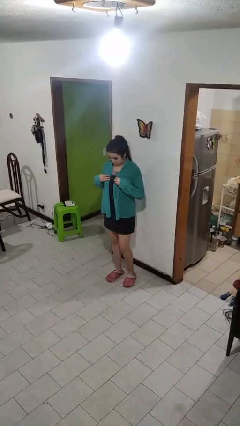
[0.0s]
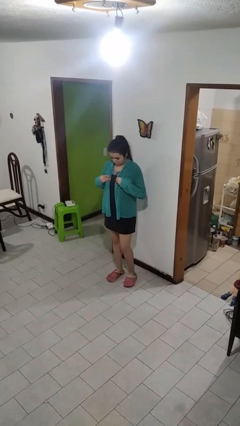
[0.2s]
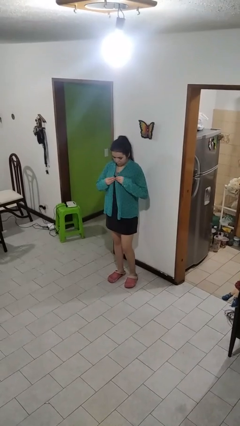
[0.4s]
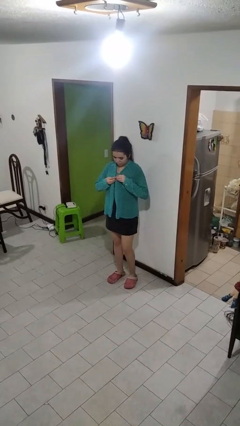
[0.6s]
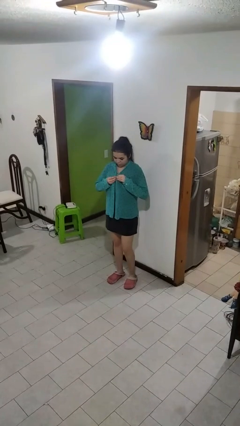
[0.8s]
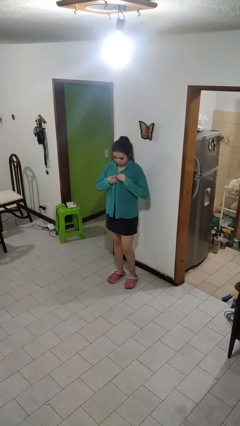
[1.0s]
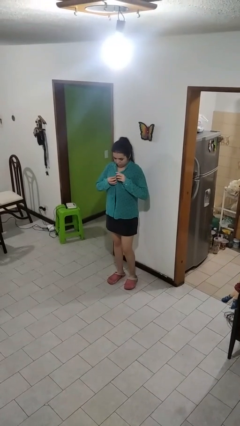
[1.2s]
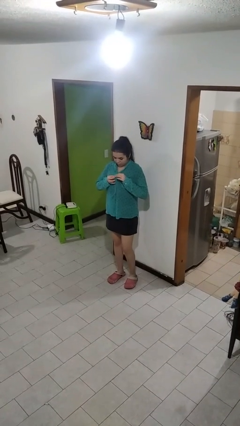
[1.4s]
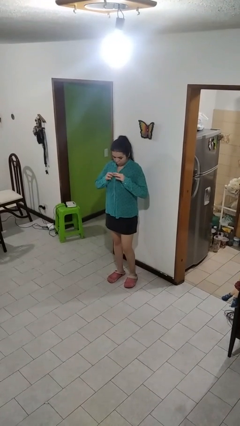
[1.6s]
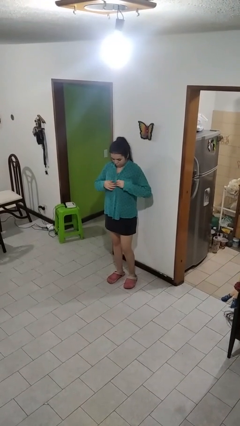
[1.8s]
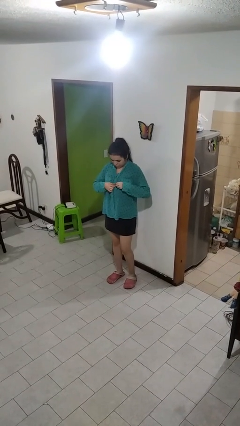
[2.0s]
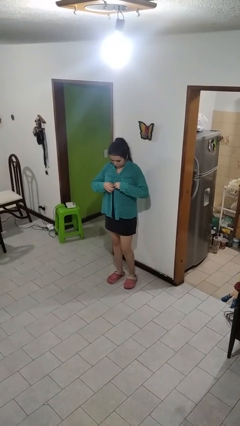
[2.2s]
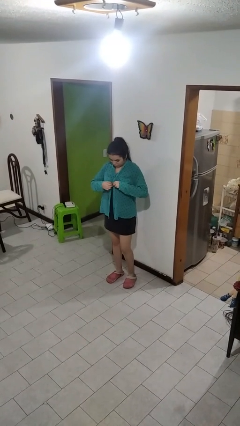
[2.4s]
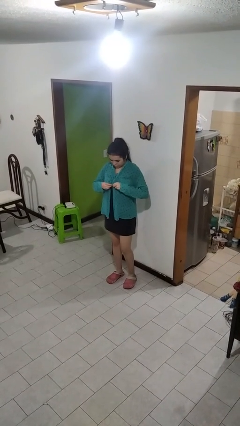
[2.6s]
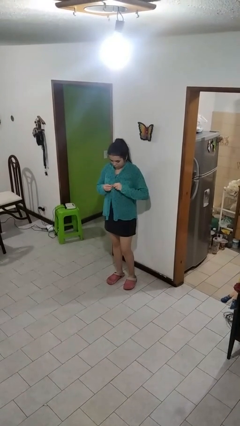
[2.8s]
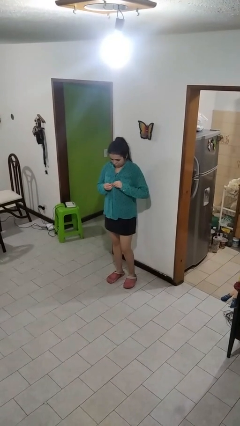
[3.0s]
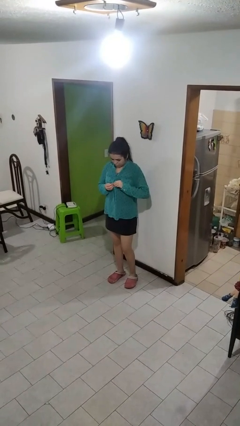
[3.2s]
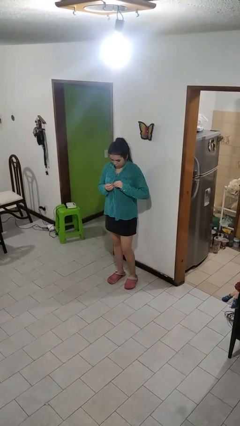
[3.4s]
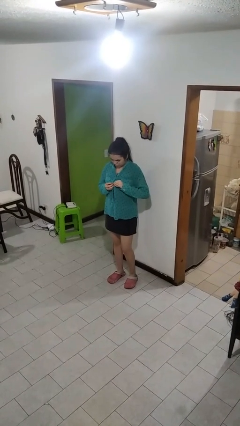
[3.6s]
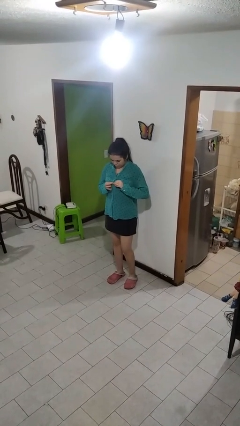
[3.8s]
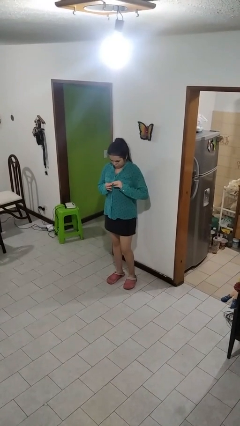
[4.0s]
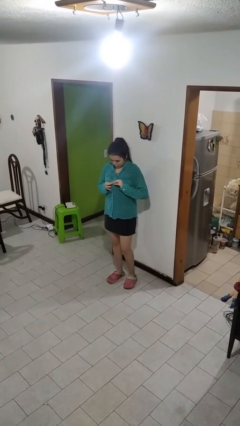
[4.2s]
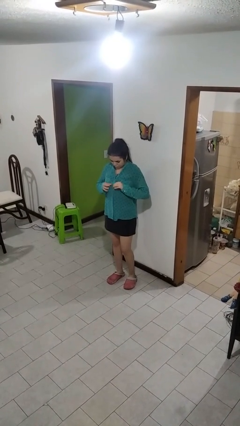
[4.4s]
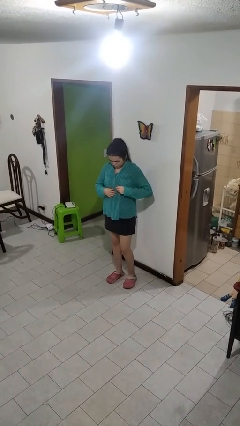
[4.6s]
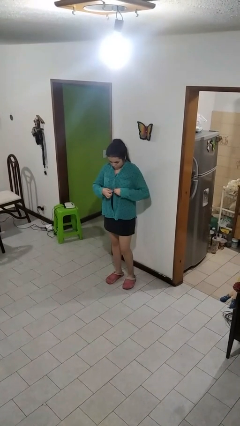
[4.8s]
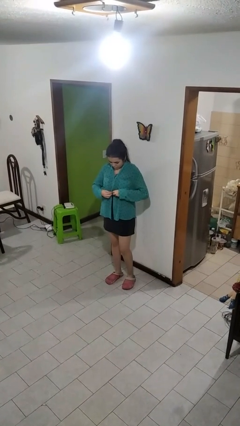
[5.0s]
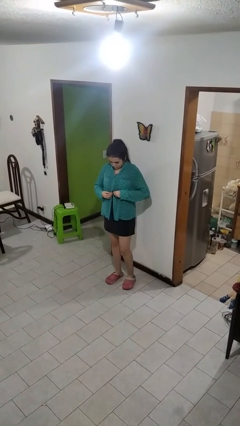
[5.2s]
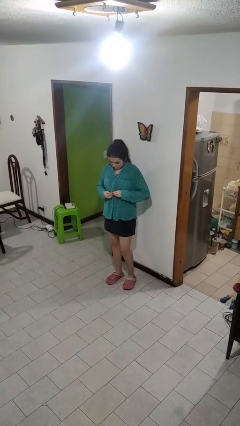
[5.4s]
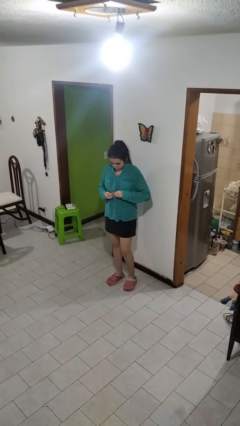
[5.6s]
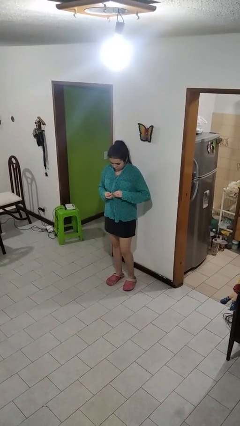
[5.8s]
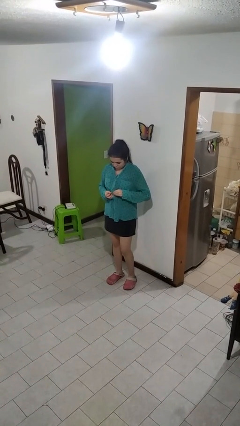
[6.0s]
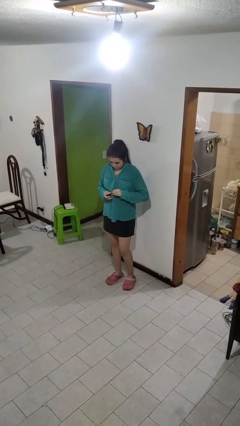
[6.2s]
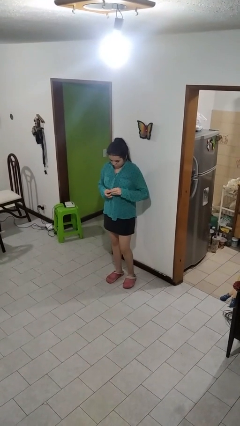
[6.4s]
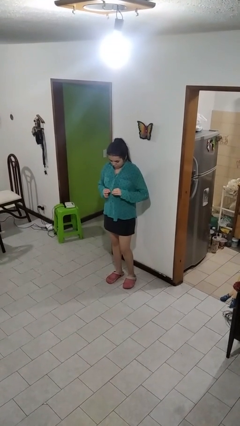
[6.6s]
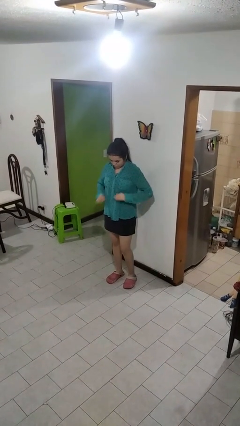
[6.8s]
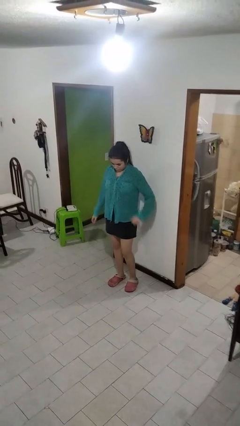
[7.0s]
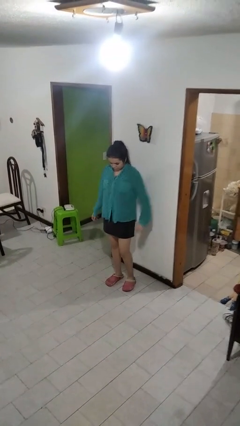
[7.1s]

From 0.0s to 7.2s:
person buttons shirt

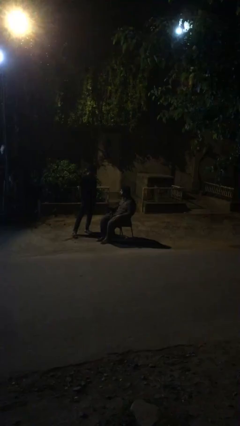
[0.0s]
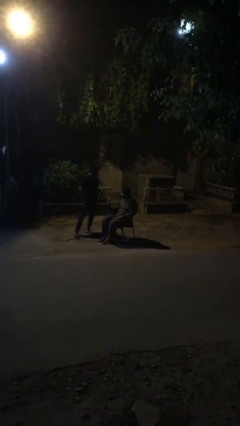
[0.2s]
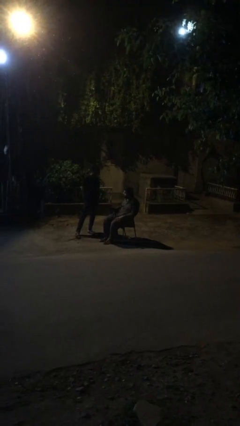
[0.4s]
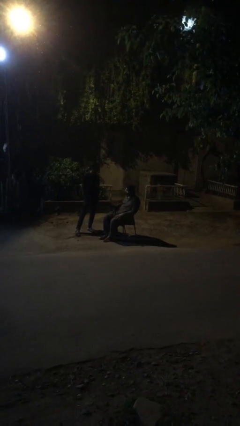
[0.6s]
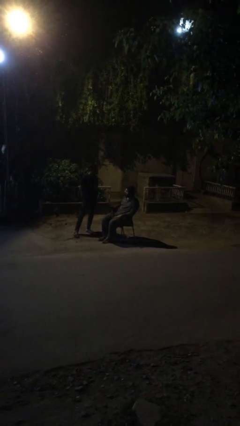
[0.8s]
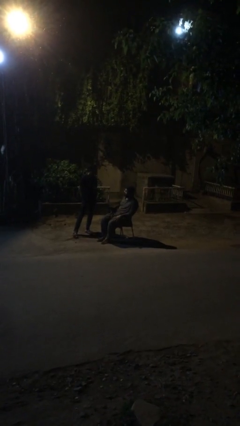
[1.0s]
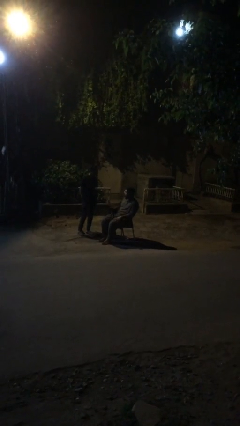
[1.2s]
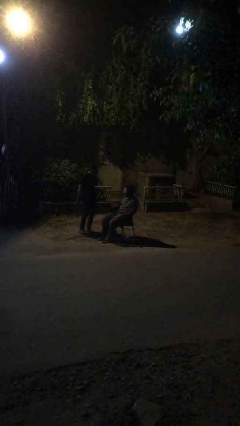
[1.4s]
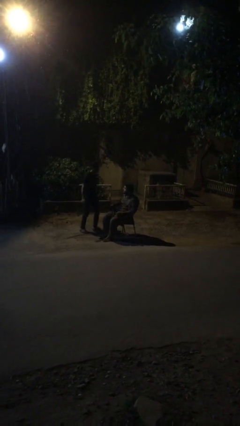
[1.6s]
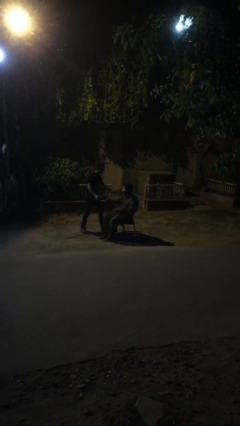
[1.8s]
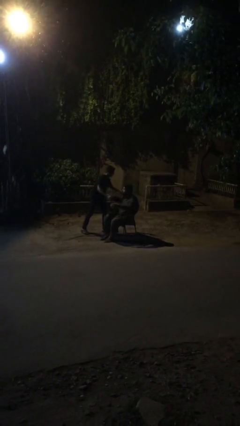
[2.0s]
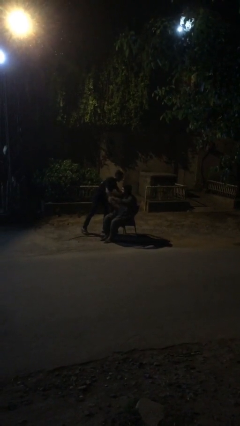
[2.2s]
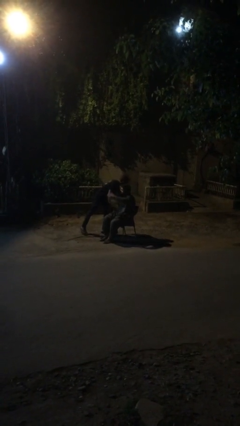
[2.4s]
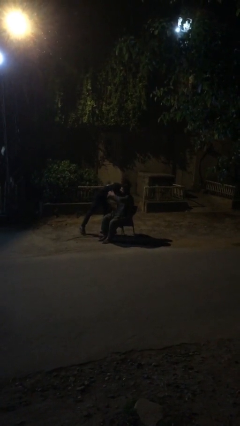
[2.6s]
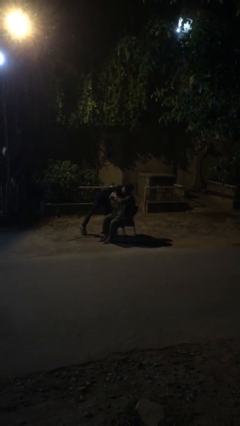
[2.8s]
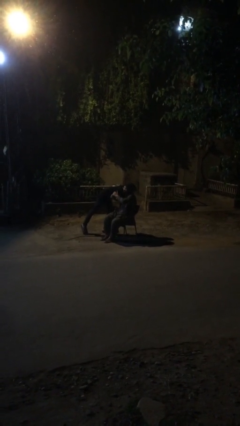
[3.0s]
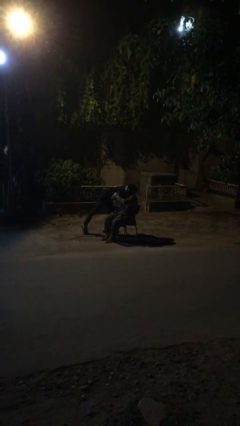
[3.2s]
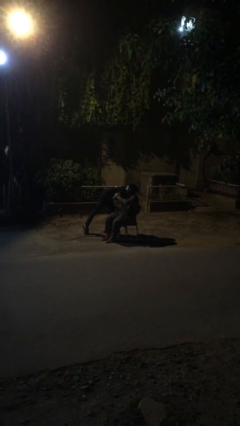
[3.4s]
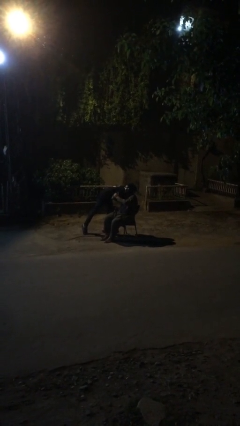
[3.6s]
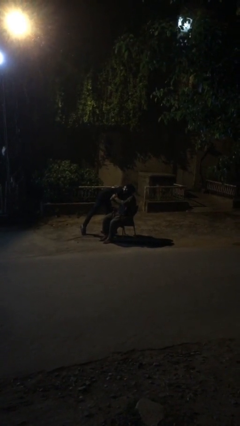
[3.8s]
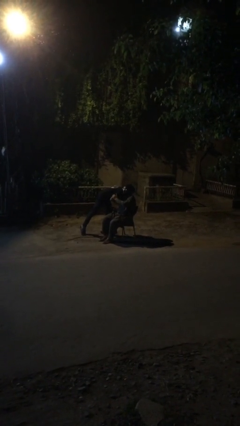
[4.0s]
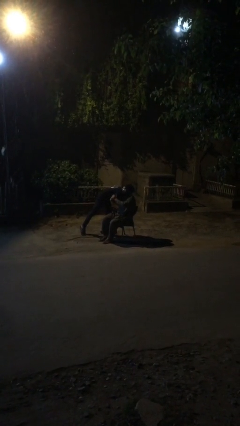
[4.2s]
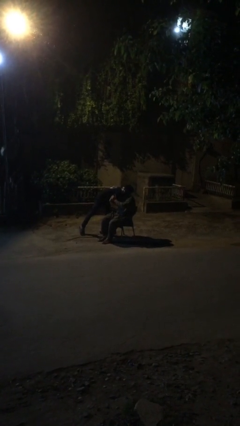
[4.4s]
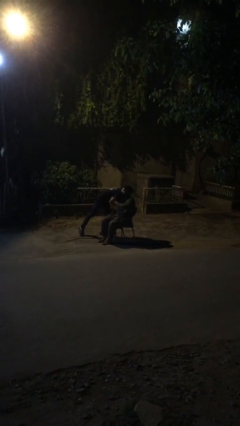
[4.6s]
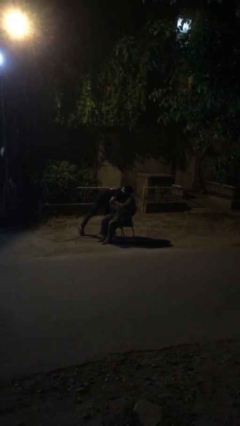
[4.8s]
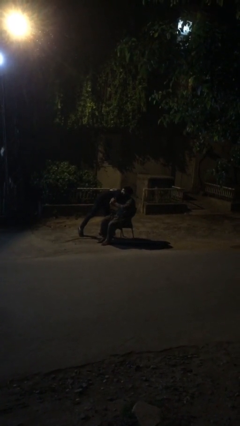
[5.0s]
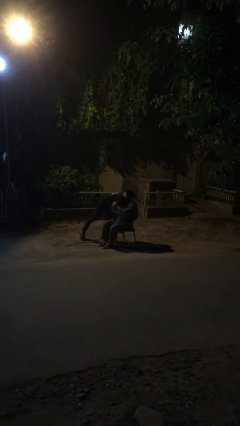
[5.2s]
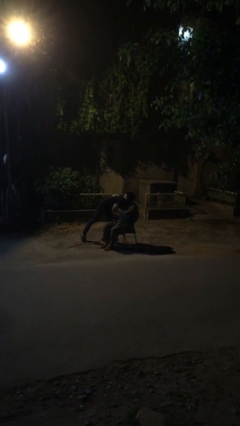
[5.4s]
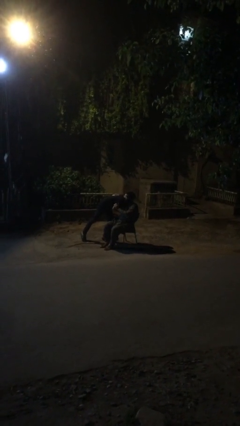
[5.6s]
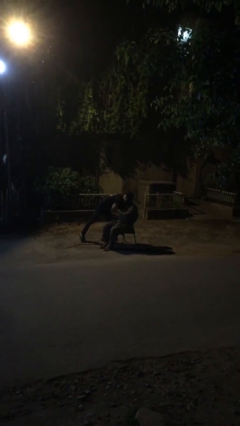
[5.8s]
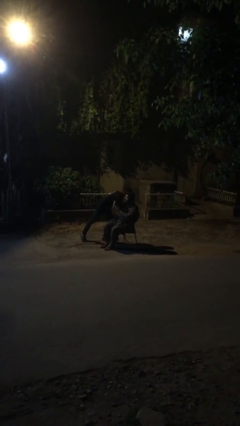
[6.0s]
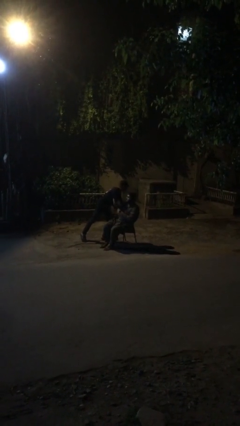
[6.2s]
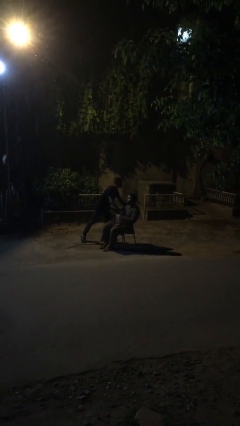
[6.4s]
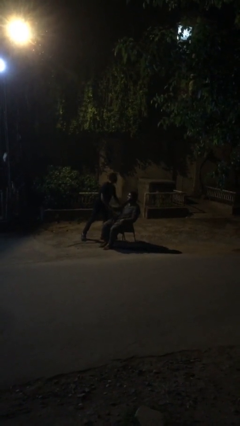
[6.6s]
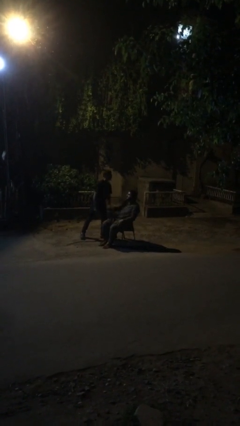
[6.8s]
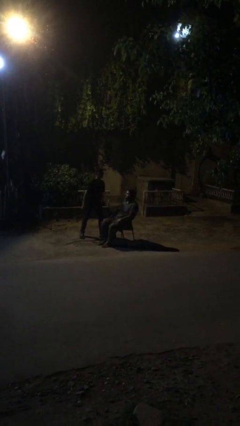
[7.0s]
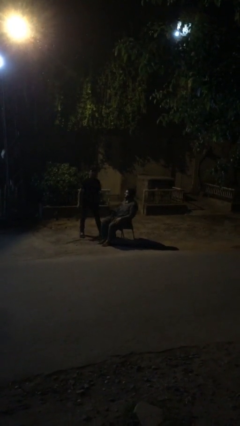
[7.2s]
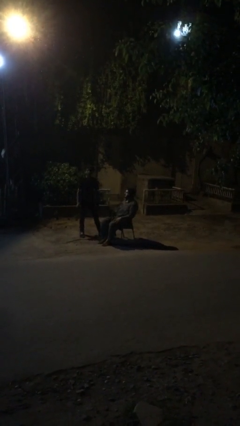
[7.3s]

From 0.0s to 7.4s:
person embraces person

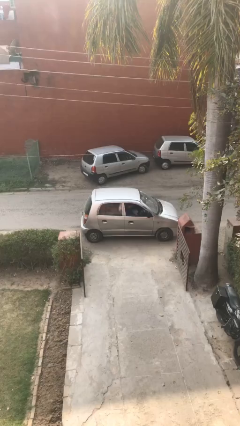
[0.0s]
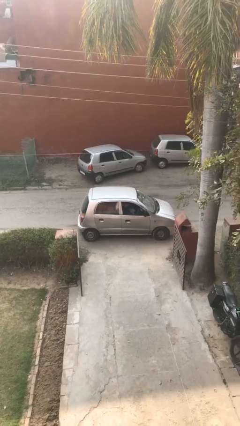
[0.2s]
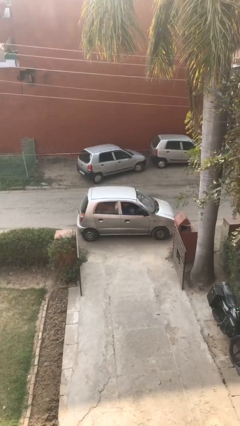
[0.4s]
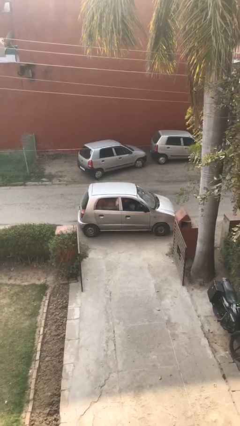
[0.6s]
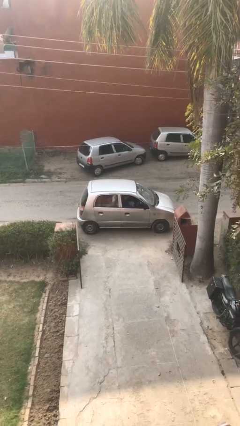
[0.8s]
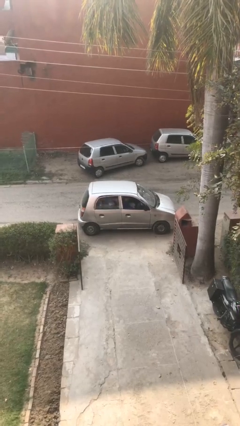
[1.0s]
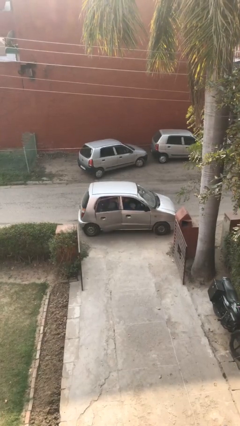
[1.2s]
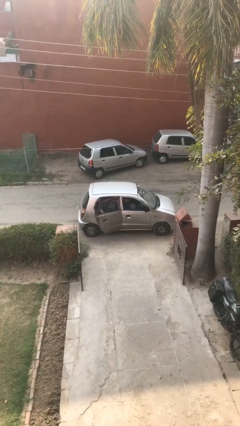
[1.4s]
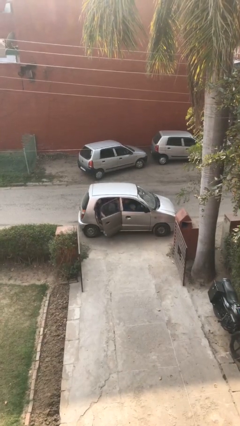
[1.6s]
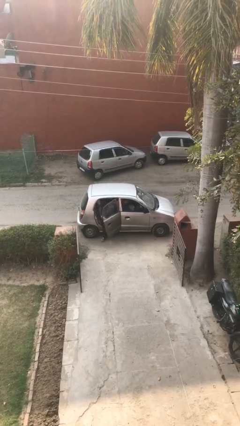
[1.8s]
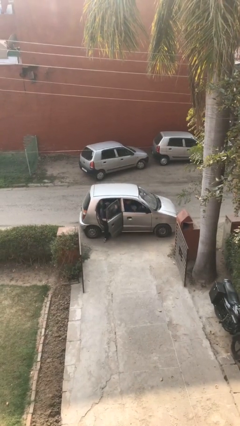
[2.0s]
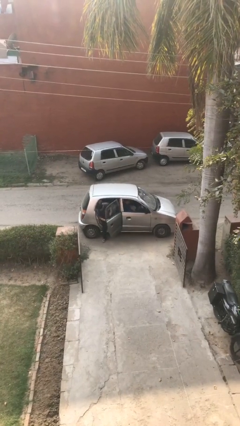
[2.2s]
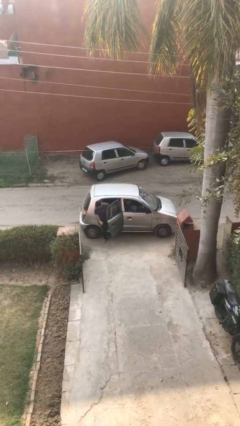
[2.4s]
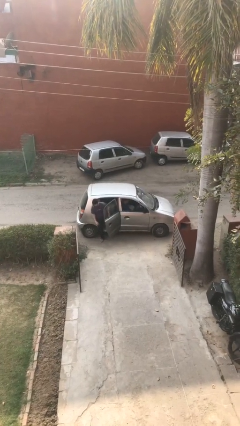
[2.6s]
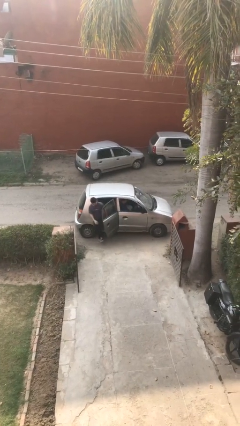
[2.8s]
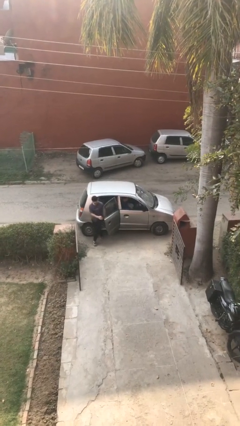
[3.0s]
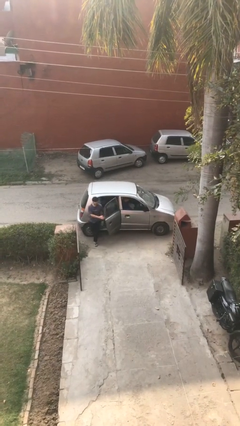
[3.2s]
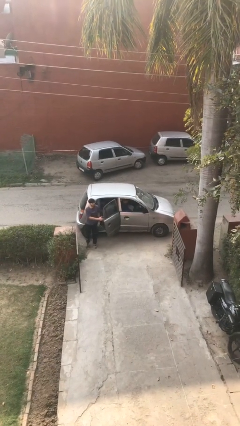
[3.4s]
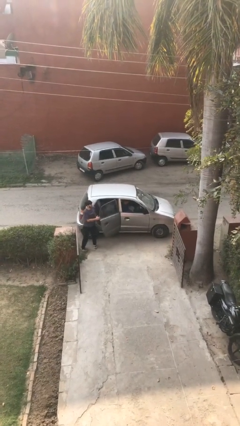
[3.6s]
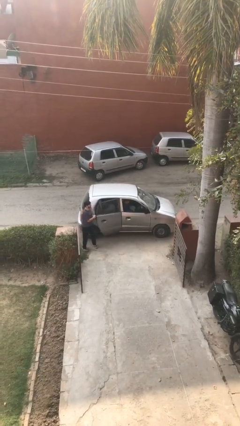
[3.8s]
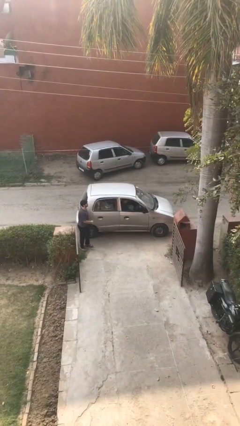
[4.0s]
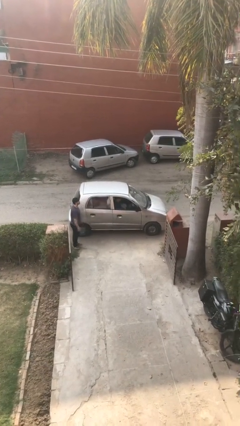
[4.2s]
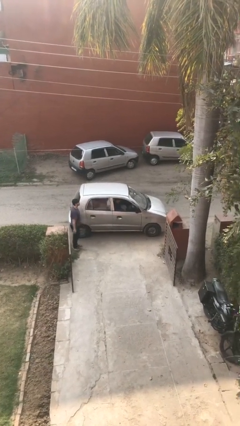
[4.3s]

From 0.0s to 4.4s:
car drops off person
